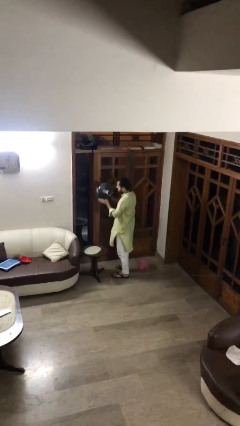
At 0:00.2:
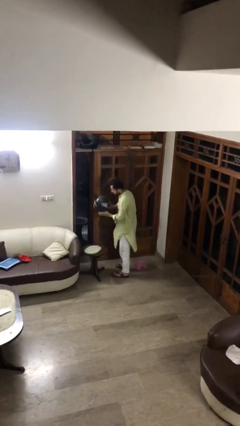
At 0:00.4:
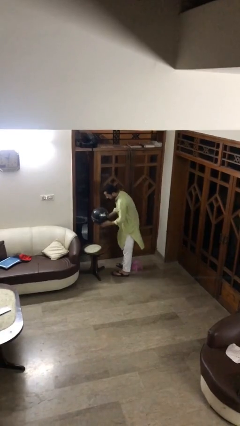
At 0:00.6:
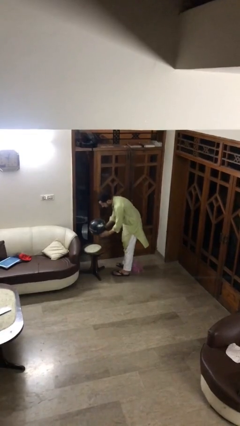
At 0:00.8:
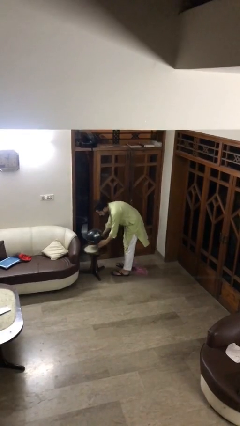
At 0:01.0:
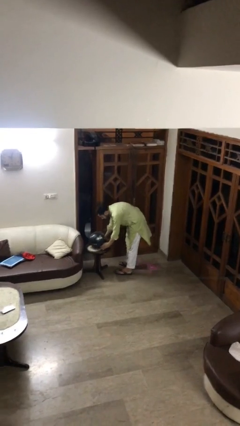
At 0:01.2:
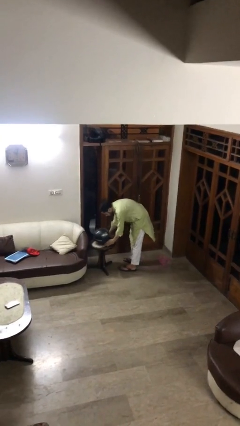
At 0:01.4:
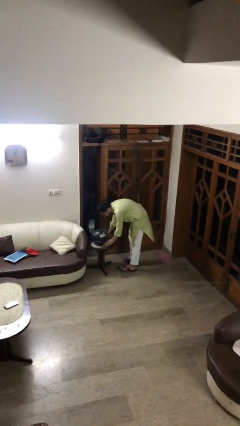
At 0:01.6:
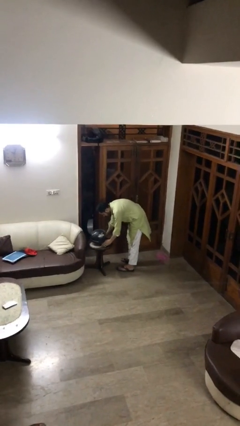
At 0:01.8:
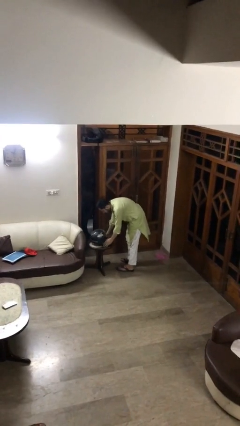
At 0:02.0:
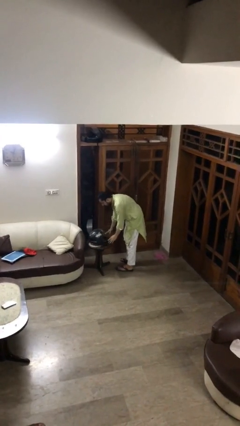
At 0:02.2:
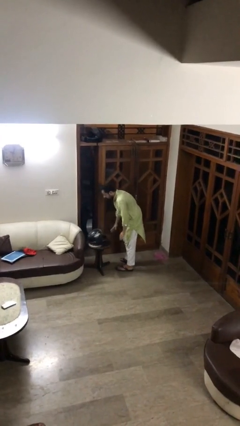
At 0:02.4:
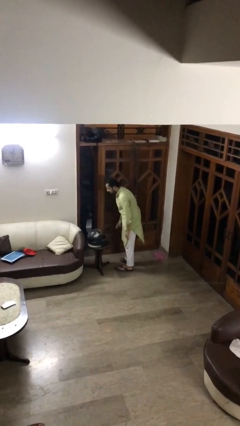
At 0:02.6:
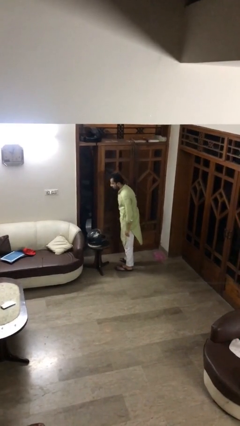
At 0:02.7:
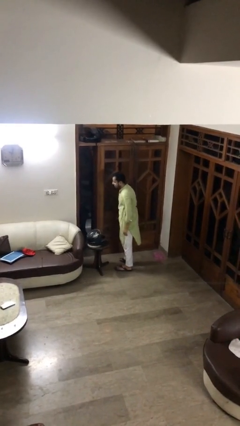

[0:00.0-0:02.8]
person puts down object on table

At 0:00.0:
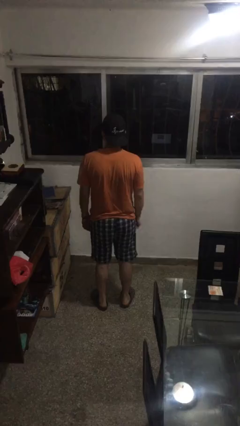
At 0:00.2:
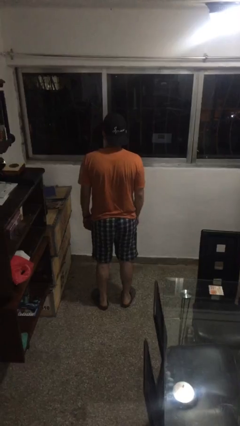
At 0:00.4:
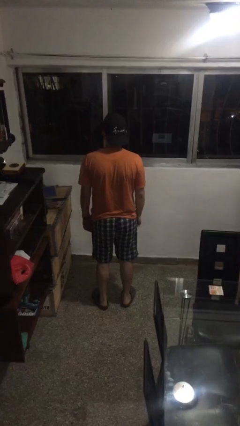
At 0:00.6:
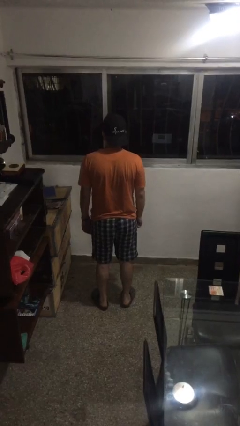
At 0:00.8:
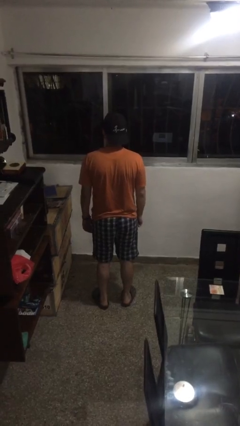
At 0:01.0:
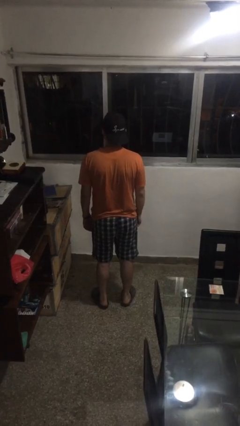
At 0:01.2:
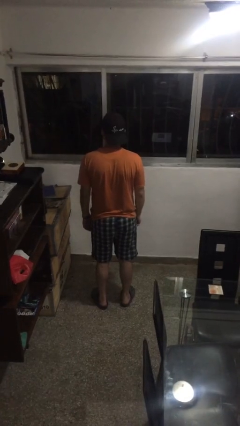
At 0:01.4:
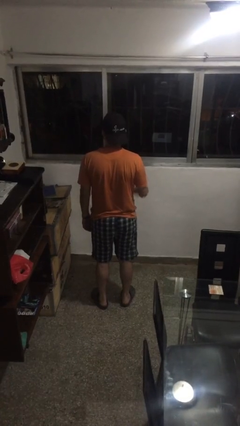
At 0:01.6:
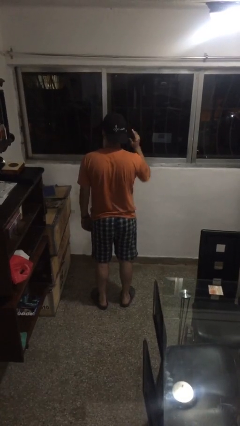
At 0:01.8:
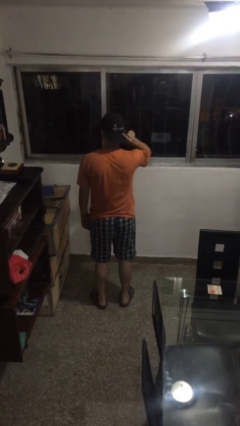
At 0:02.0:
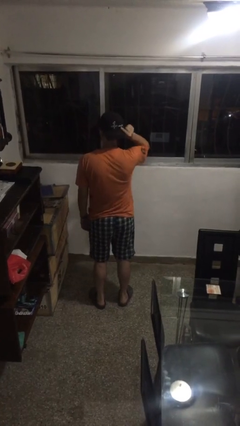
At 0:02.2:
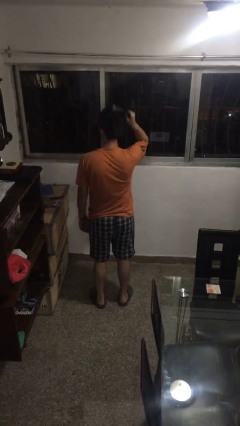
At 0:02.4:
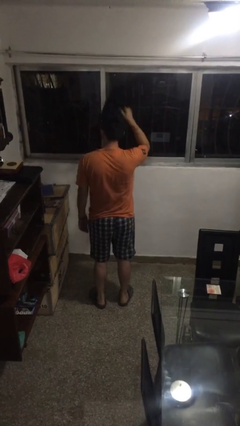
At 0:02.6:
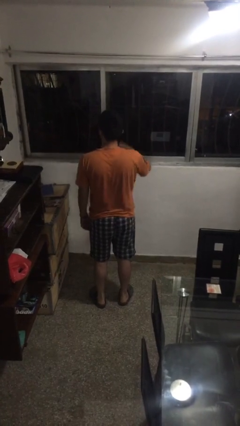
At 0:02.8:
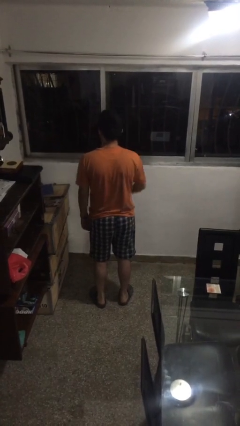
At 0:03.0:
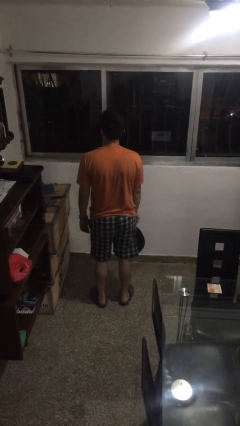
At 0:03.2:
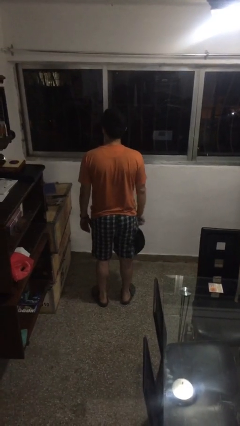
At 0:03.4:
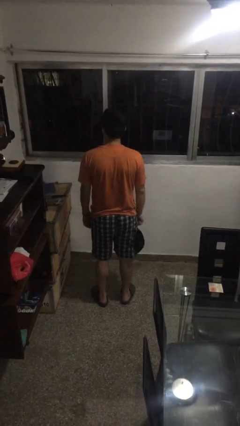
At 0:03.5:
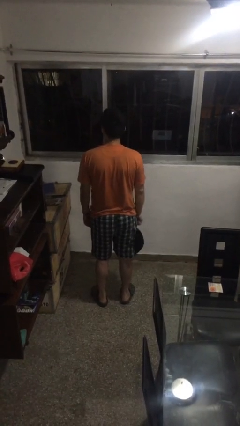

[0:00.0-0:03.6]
person takes off hat

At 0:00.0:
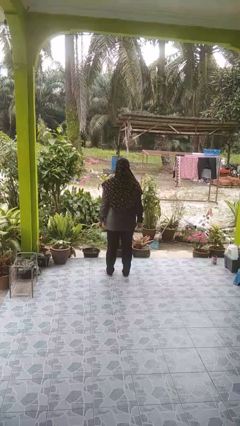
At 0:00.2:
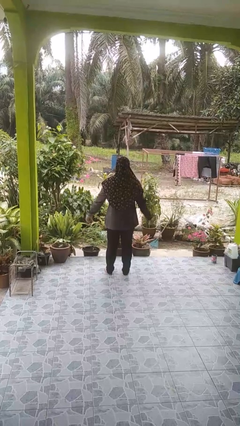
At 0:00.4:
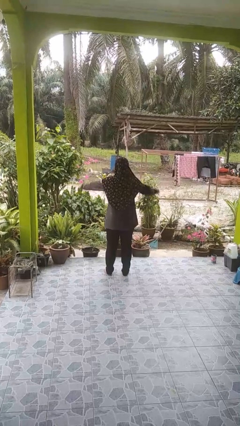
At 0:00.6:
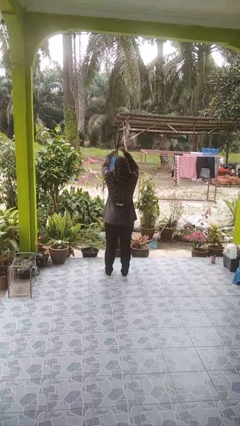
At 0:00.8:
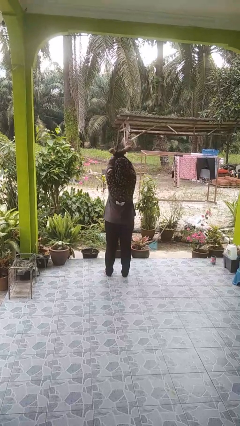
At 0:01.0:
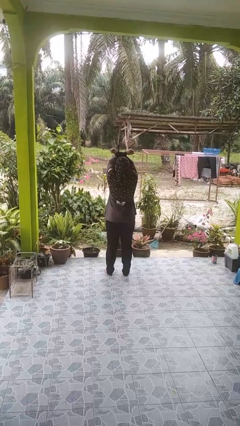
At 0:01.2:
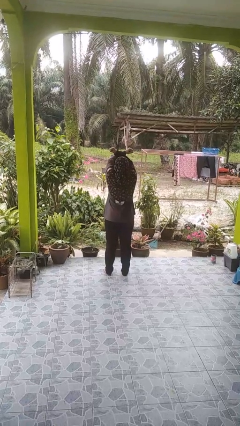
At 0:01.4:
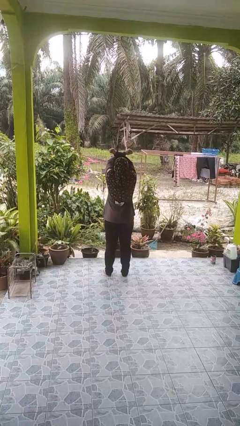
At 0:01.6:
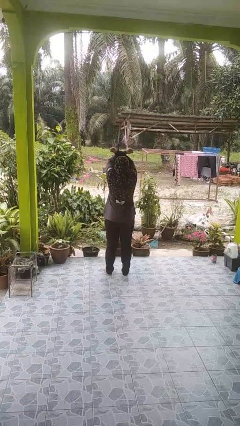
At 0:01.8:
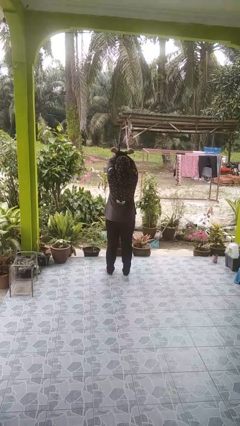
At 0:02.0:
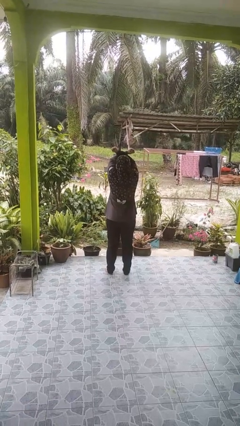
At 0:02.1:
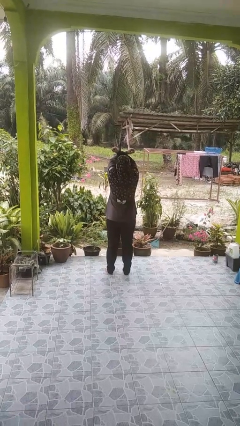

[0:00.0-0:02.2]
person crosses arms

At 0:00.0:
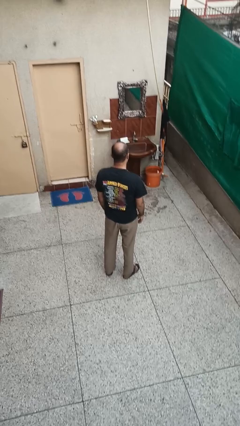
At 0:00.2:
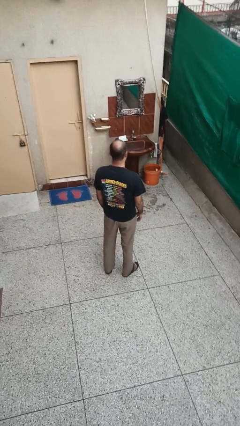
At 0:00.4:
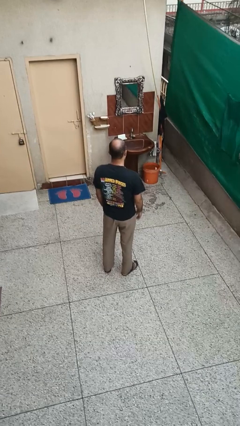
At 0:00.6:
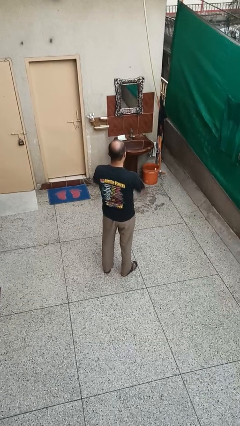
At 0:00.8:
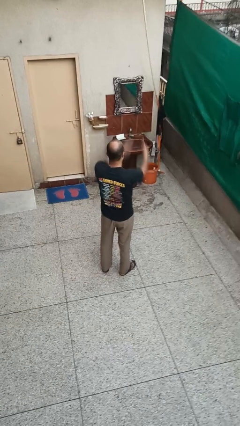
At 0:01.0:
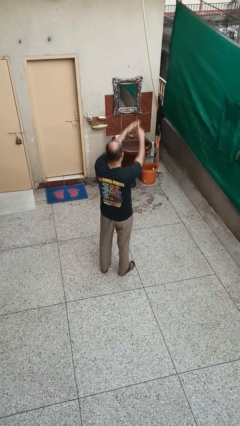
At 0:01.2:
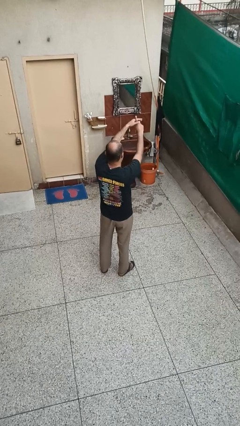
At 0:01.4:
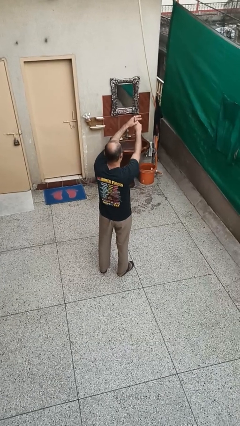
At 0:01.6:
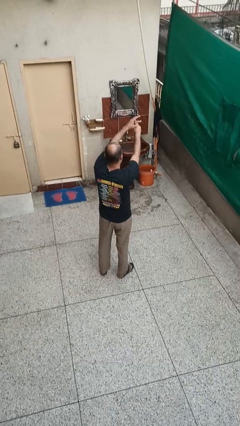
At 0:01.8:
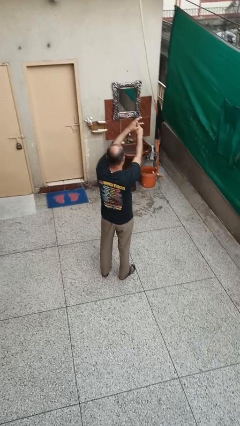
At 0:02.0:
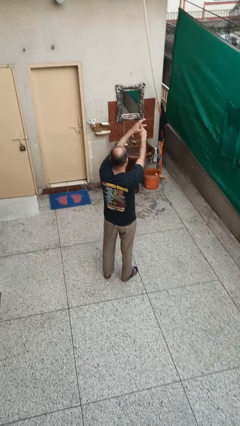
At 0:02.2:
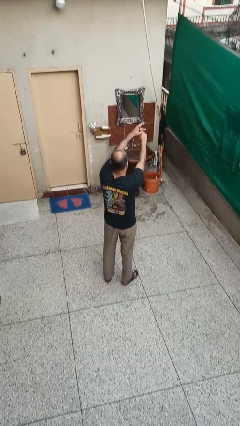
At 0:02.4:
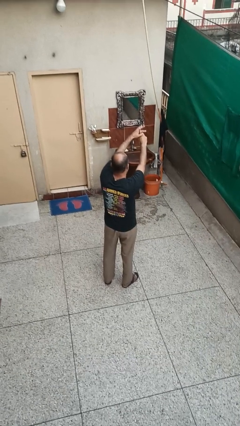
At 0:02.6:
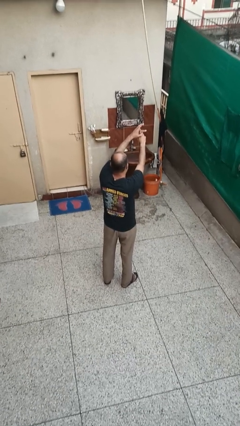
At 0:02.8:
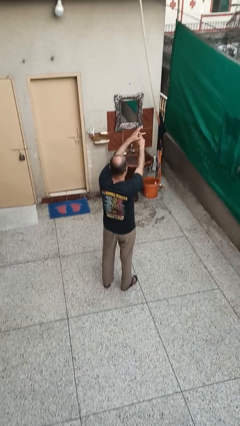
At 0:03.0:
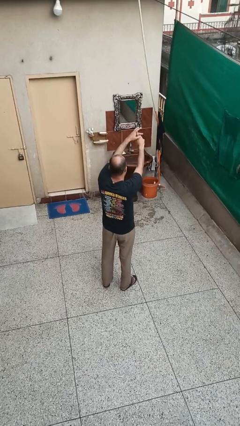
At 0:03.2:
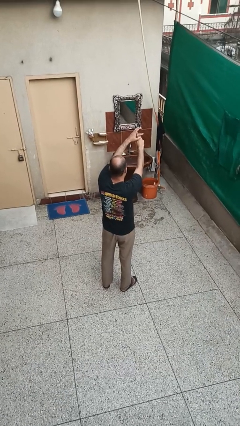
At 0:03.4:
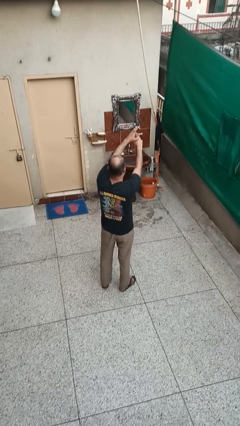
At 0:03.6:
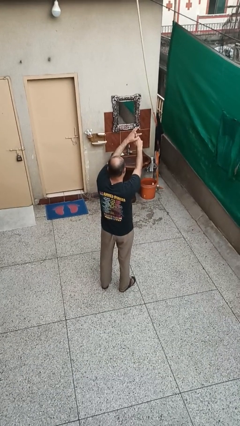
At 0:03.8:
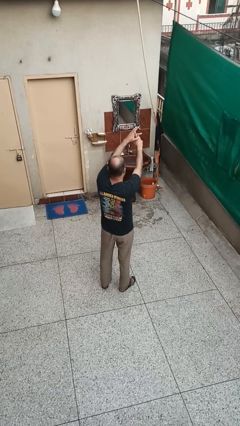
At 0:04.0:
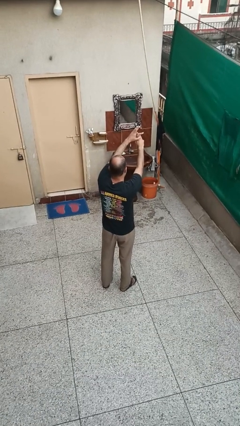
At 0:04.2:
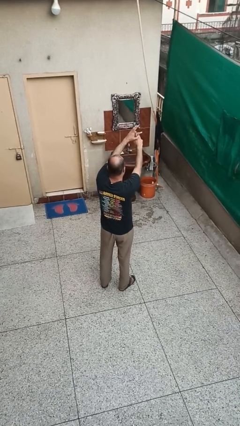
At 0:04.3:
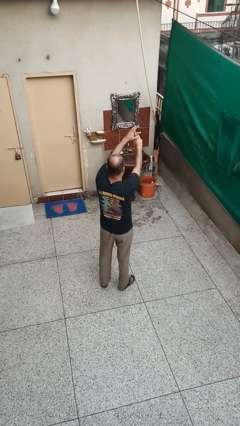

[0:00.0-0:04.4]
person cracks knuckles

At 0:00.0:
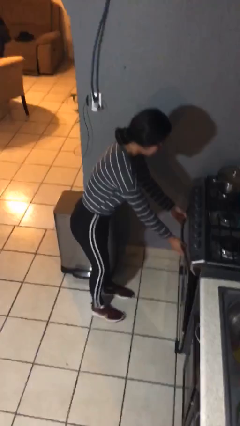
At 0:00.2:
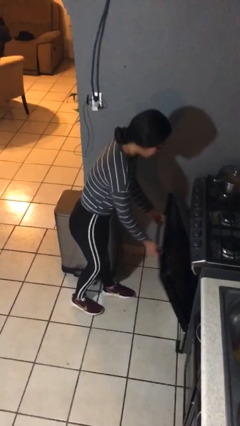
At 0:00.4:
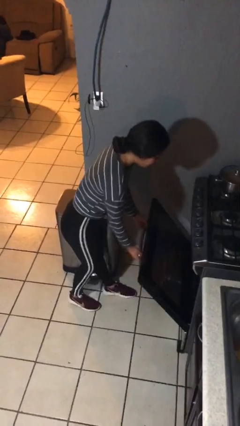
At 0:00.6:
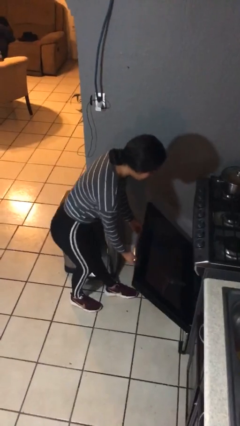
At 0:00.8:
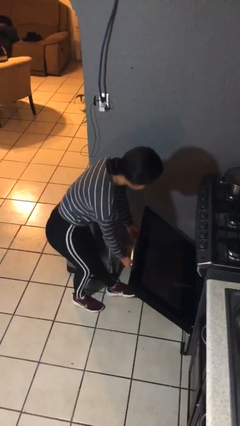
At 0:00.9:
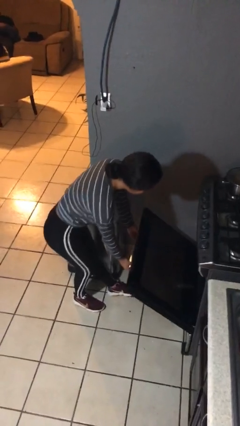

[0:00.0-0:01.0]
person opens oven door

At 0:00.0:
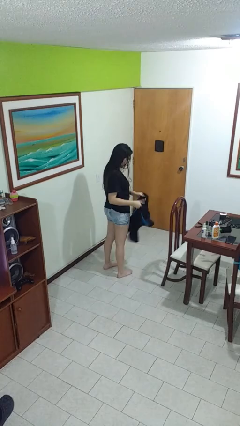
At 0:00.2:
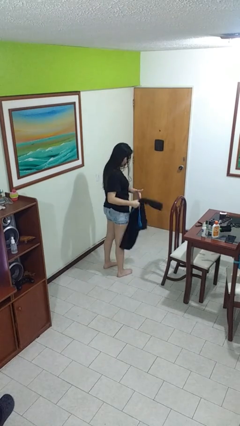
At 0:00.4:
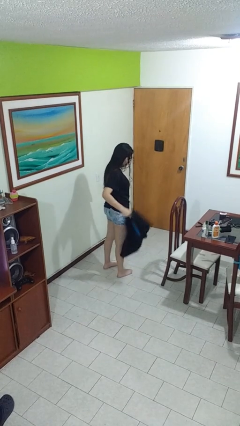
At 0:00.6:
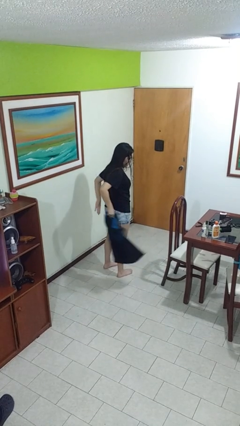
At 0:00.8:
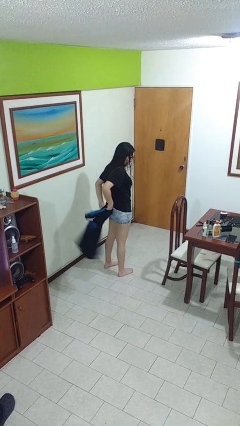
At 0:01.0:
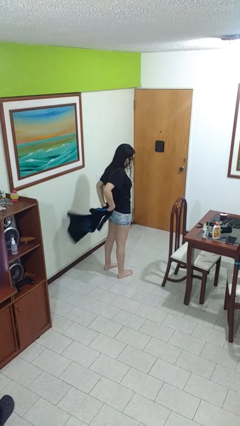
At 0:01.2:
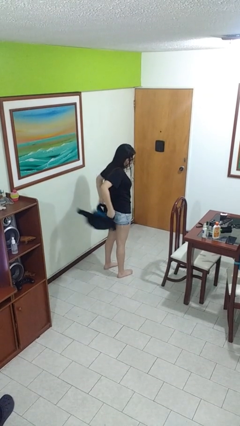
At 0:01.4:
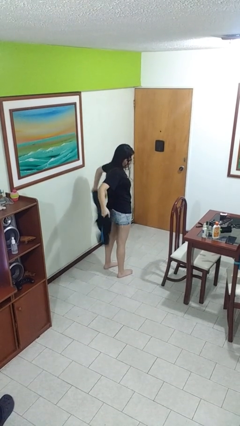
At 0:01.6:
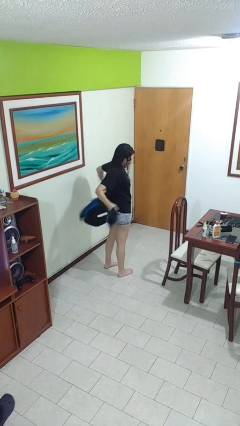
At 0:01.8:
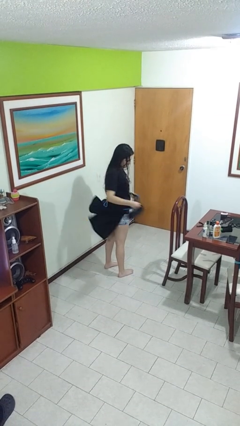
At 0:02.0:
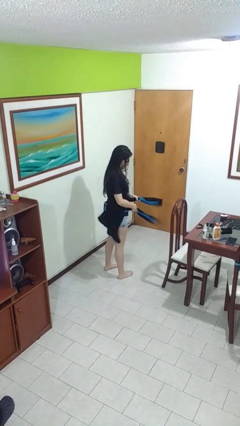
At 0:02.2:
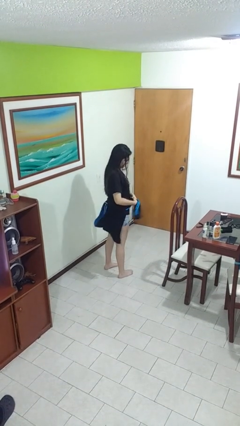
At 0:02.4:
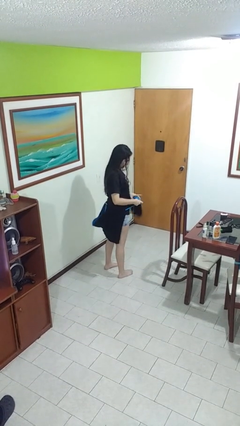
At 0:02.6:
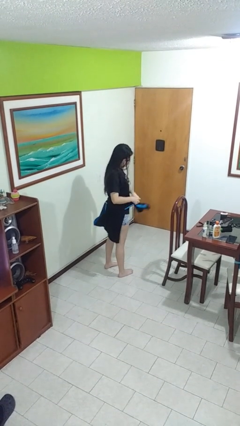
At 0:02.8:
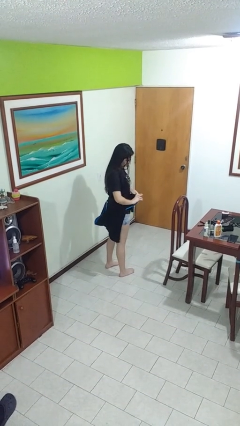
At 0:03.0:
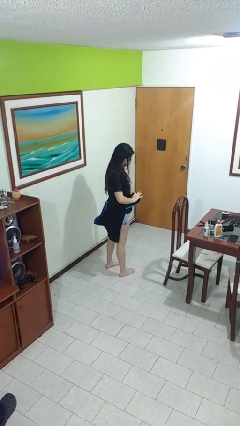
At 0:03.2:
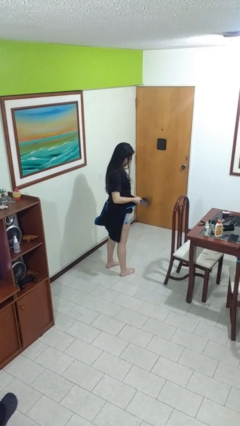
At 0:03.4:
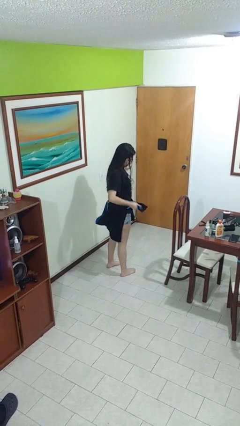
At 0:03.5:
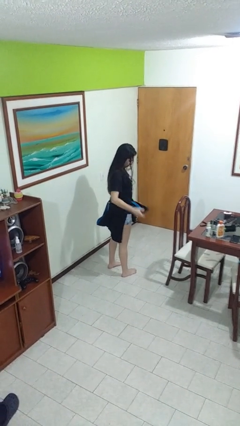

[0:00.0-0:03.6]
person ties jacket around waist
